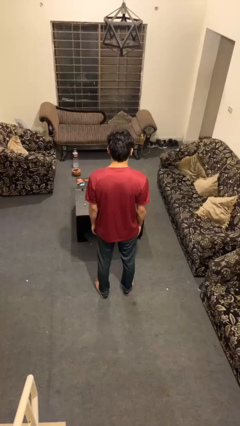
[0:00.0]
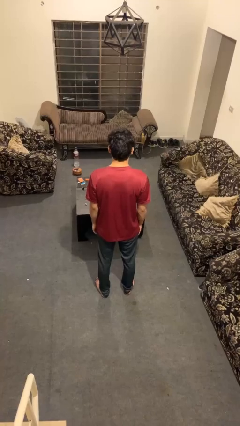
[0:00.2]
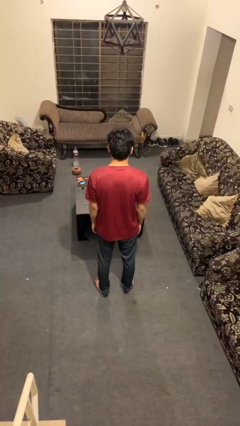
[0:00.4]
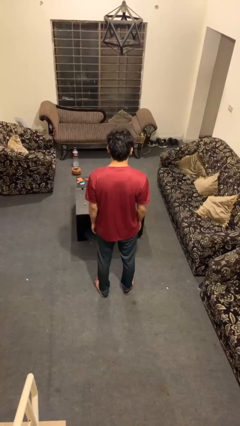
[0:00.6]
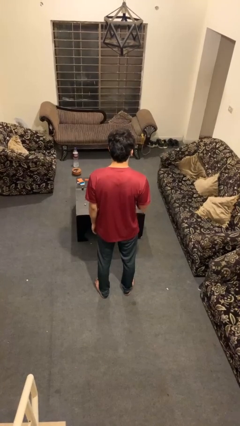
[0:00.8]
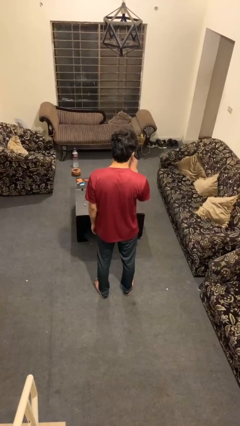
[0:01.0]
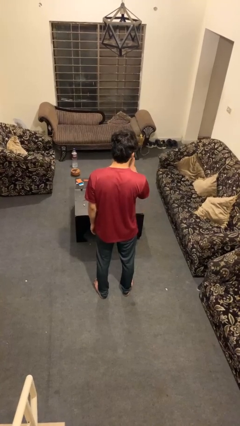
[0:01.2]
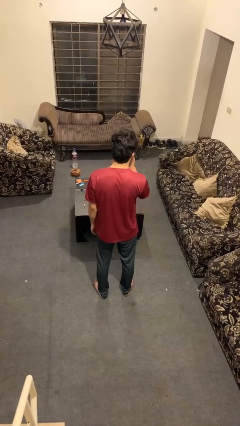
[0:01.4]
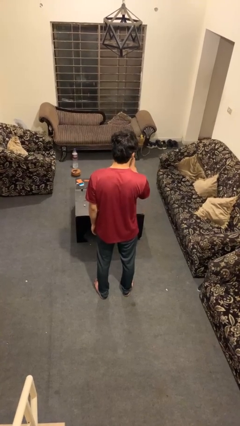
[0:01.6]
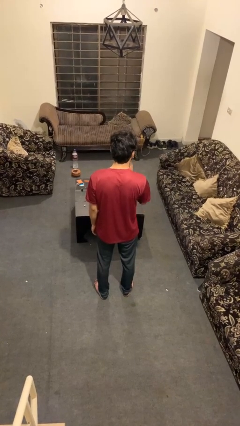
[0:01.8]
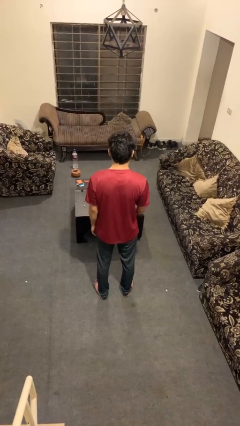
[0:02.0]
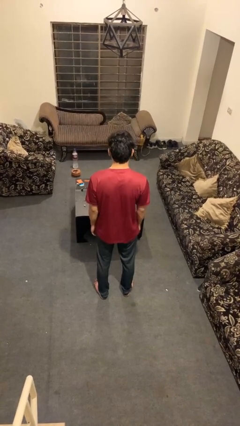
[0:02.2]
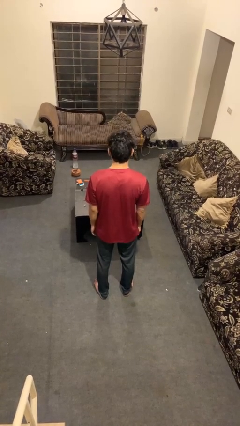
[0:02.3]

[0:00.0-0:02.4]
person gestures be quiet

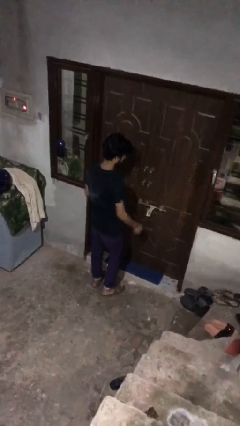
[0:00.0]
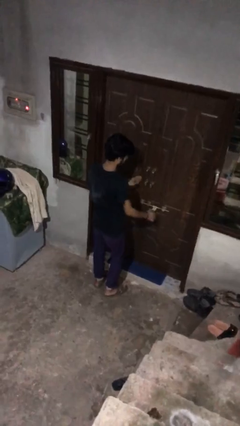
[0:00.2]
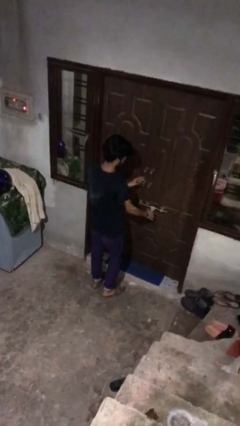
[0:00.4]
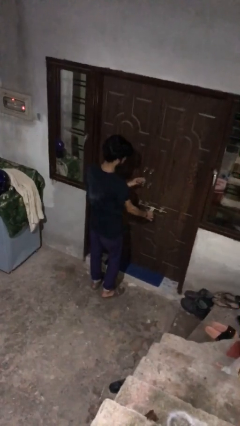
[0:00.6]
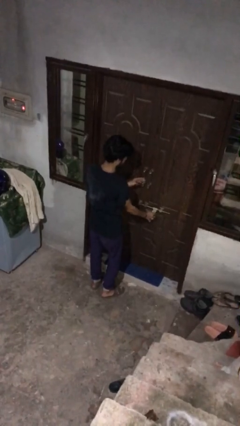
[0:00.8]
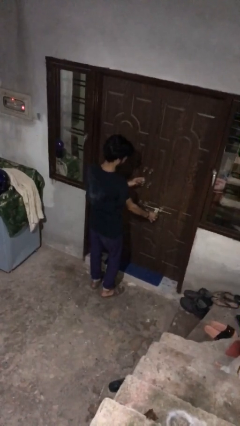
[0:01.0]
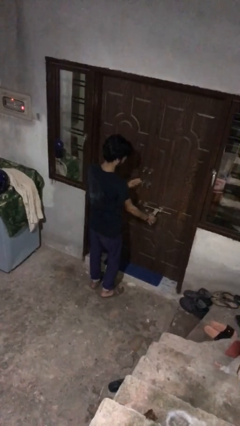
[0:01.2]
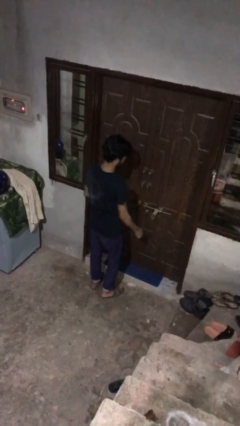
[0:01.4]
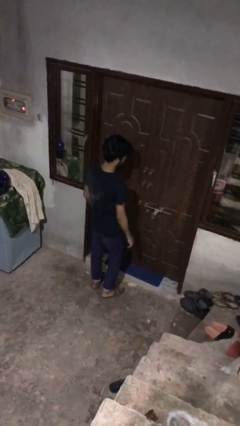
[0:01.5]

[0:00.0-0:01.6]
person unlocks door with keys

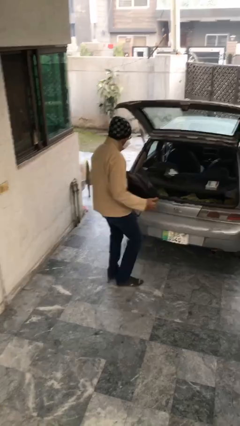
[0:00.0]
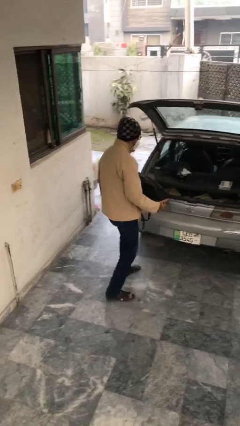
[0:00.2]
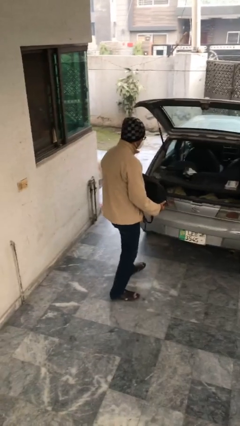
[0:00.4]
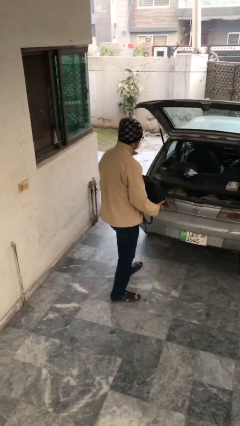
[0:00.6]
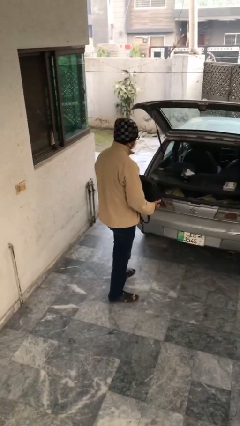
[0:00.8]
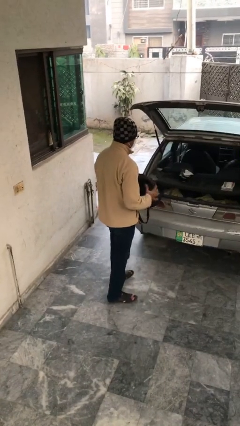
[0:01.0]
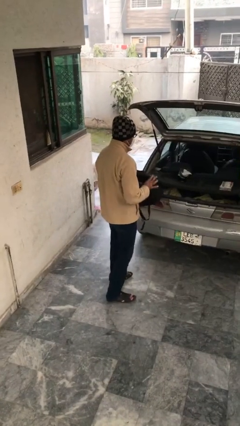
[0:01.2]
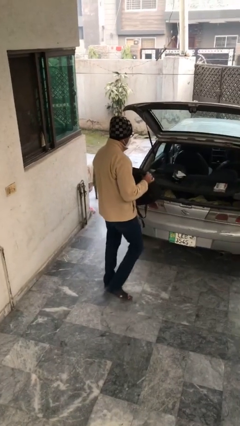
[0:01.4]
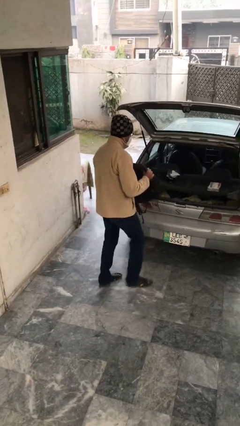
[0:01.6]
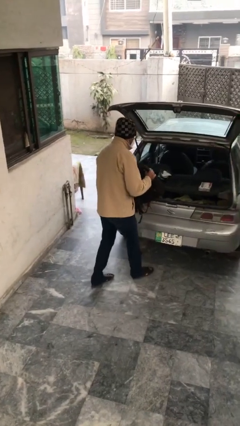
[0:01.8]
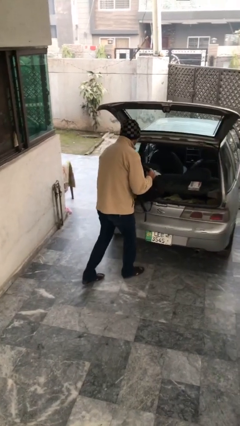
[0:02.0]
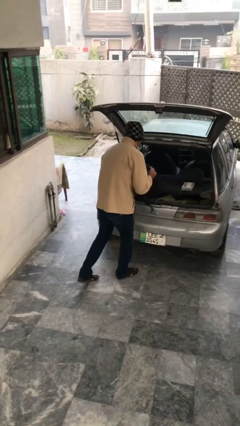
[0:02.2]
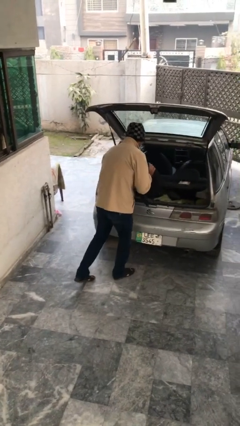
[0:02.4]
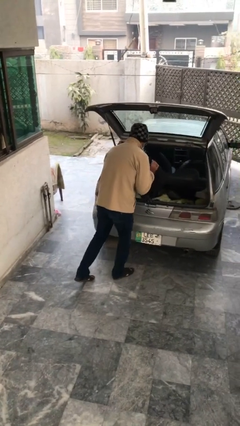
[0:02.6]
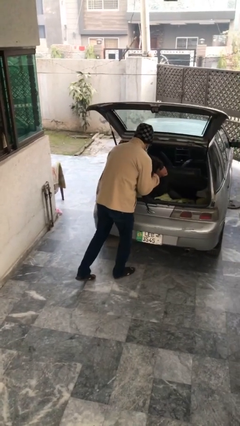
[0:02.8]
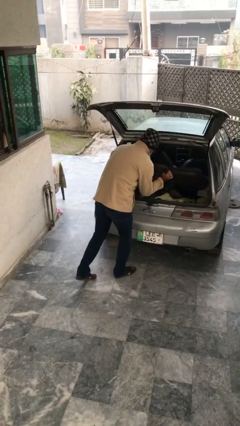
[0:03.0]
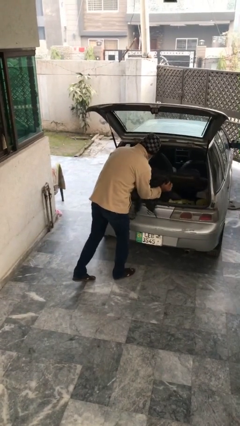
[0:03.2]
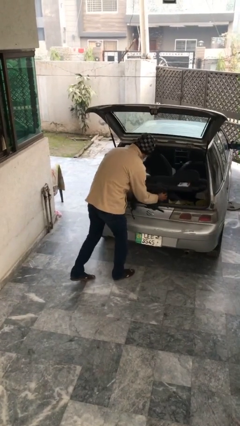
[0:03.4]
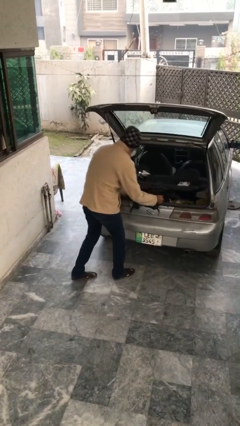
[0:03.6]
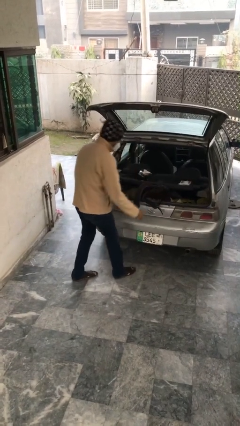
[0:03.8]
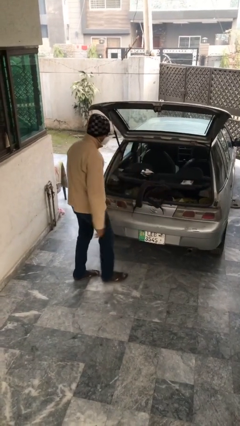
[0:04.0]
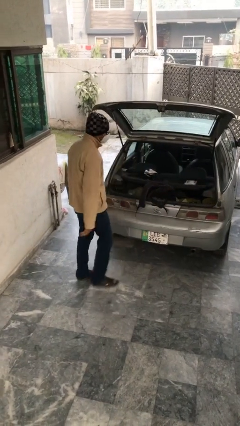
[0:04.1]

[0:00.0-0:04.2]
person loads car

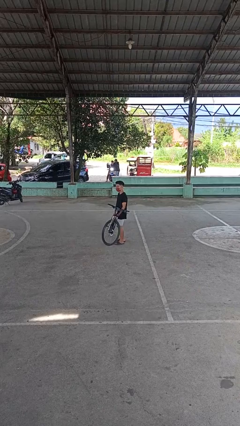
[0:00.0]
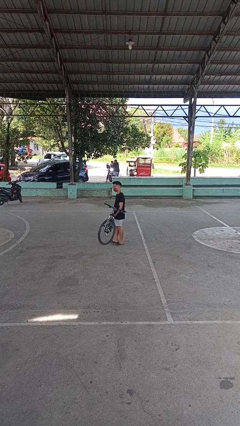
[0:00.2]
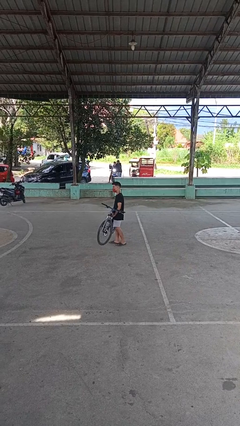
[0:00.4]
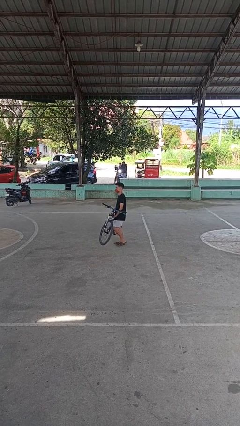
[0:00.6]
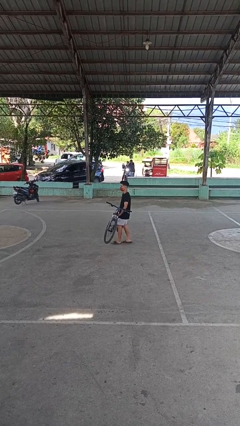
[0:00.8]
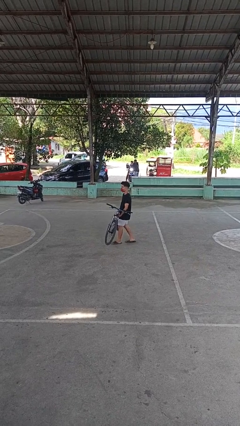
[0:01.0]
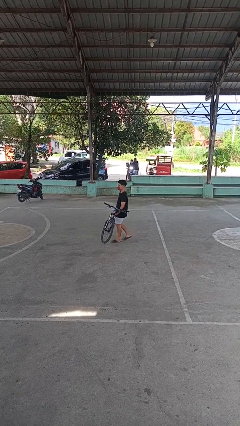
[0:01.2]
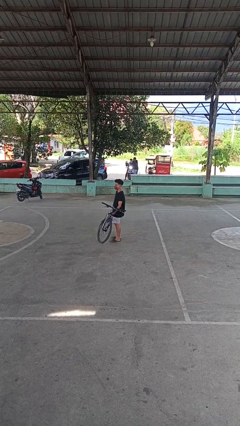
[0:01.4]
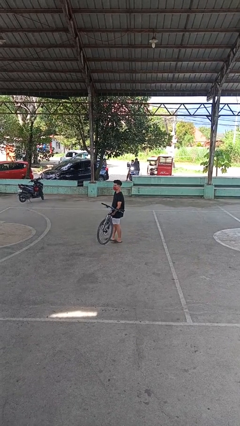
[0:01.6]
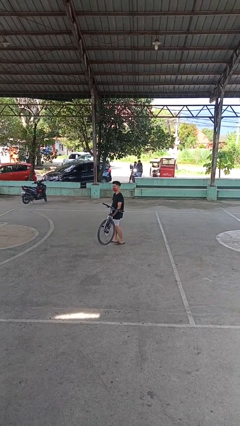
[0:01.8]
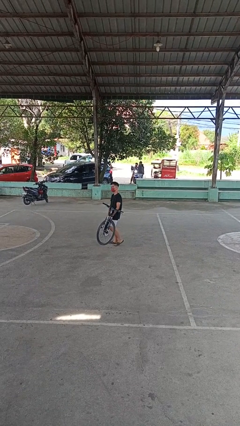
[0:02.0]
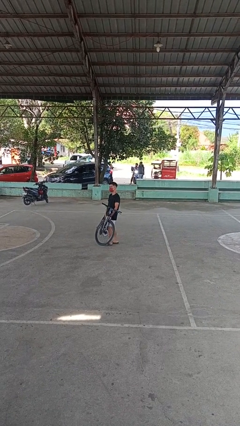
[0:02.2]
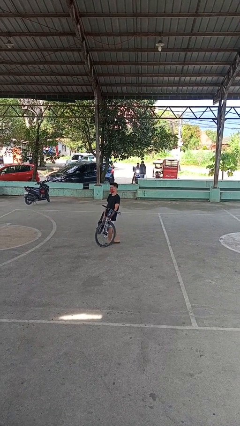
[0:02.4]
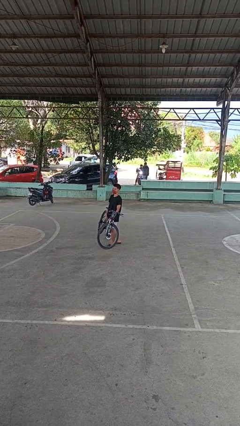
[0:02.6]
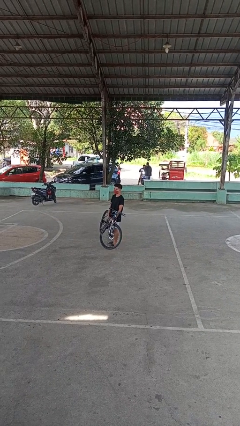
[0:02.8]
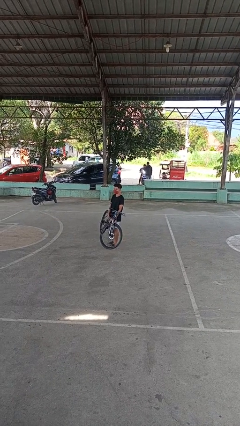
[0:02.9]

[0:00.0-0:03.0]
person carries bicycle

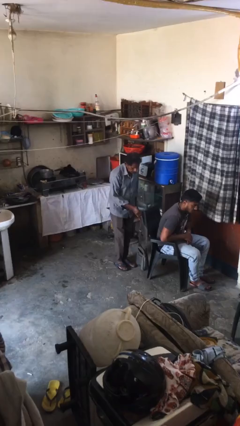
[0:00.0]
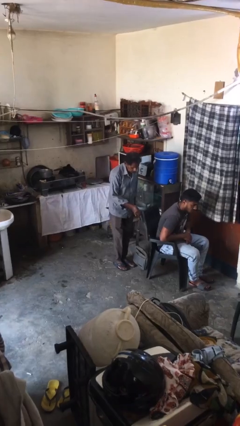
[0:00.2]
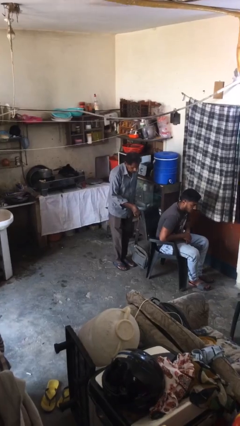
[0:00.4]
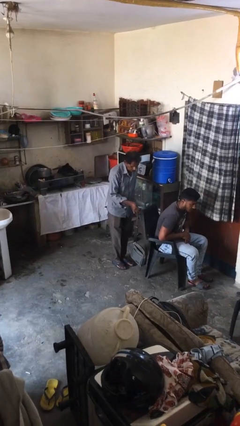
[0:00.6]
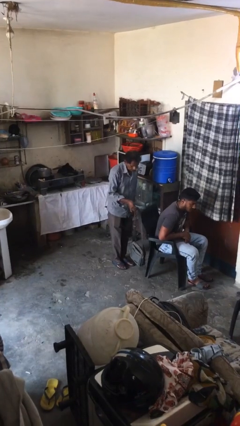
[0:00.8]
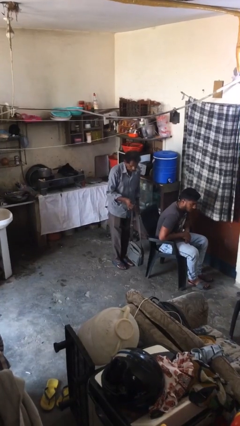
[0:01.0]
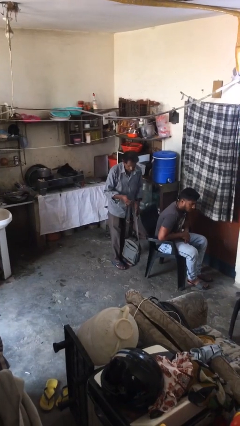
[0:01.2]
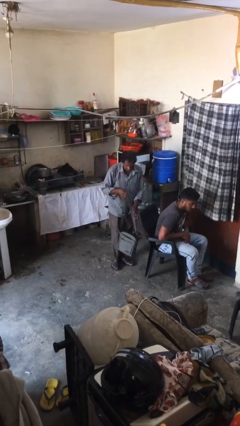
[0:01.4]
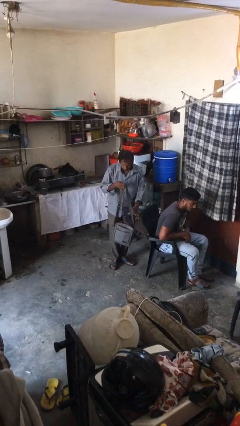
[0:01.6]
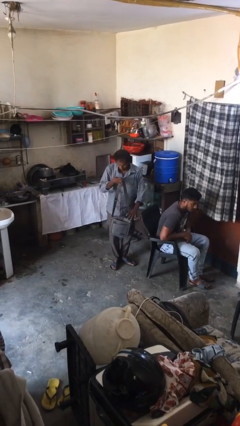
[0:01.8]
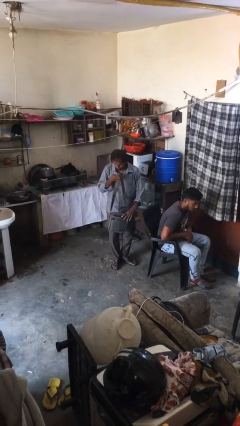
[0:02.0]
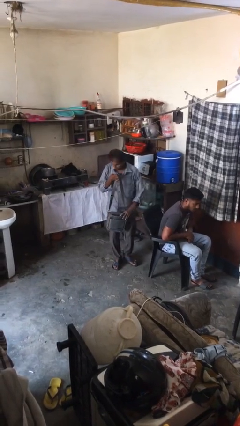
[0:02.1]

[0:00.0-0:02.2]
person steals object from person

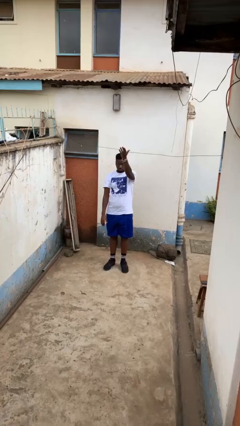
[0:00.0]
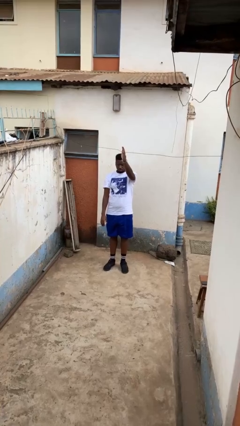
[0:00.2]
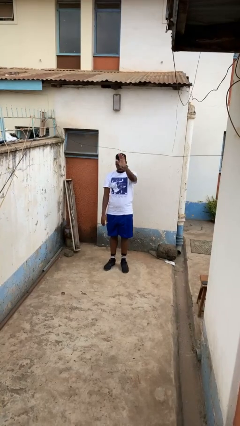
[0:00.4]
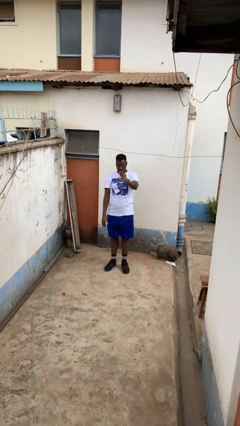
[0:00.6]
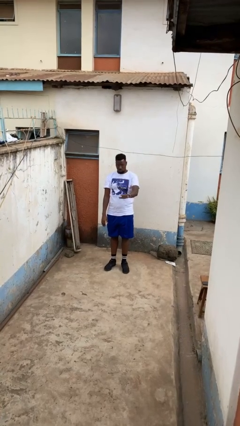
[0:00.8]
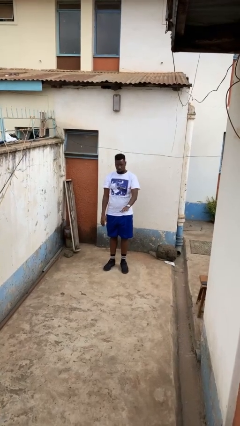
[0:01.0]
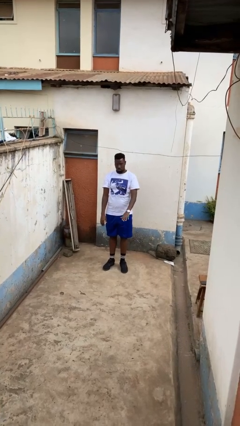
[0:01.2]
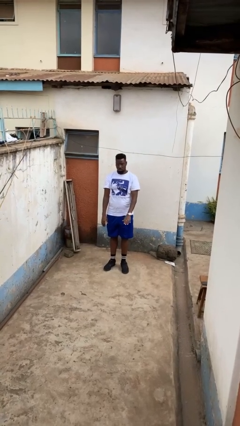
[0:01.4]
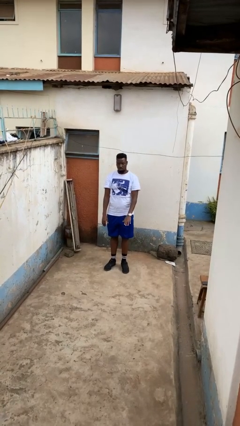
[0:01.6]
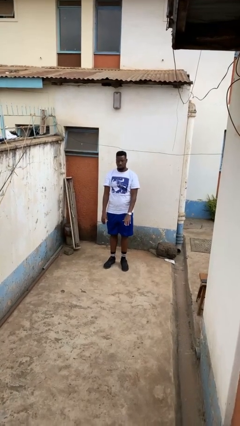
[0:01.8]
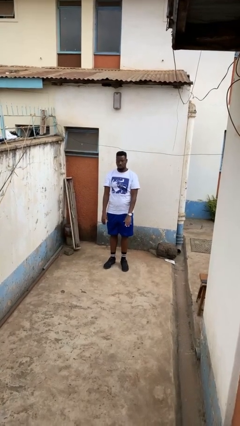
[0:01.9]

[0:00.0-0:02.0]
person gestures swipe down

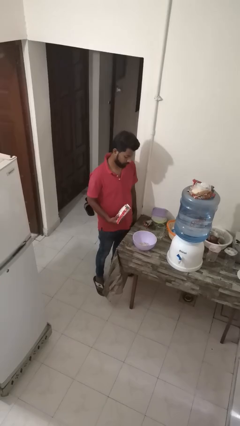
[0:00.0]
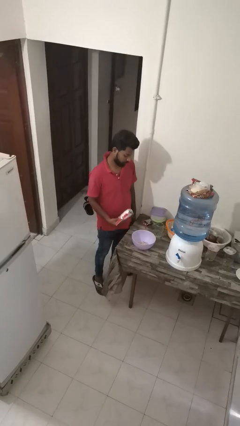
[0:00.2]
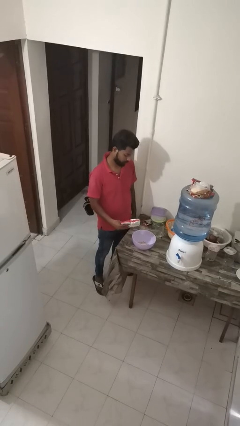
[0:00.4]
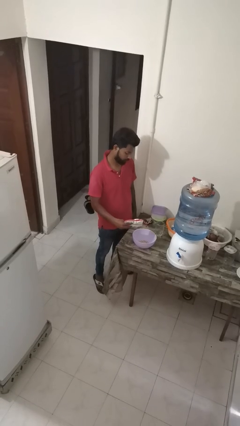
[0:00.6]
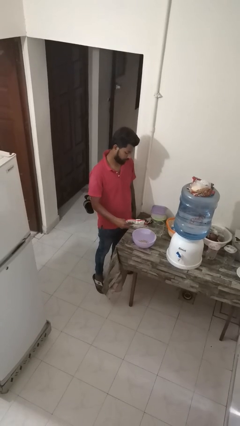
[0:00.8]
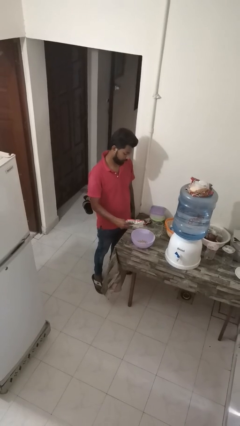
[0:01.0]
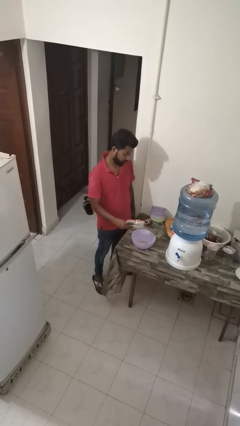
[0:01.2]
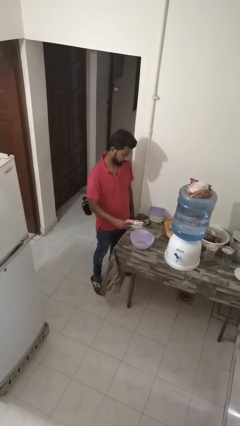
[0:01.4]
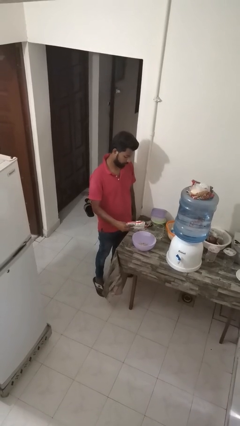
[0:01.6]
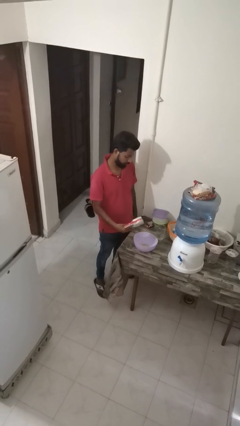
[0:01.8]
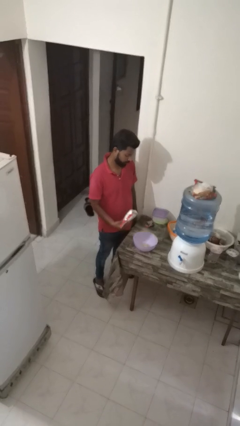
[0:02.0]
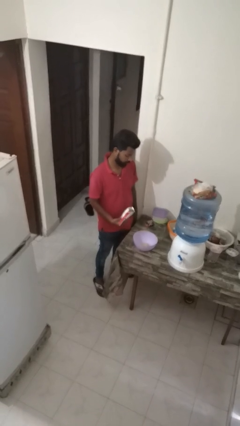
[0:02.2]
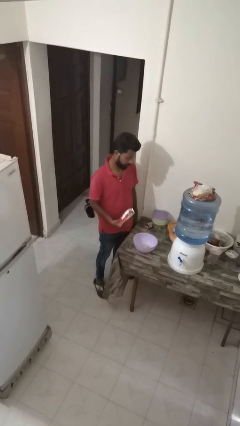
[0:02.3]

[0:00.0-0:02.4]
person pours into bowl
